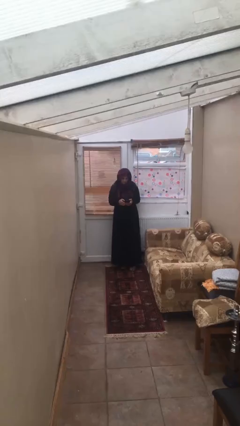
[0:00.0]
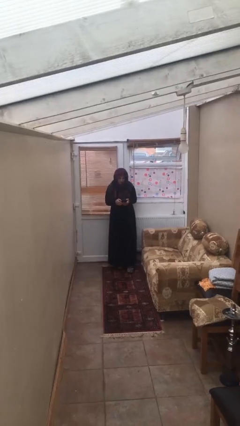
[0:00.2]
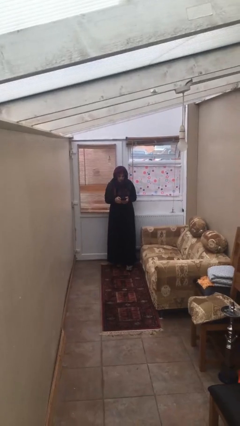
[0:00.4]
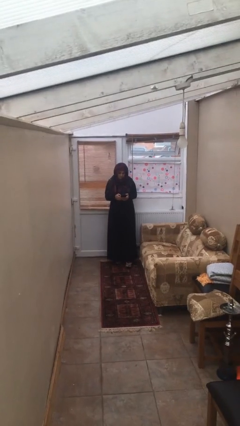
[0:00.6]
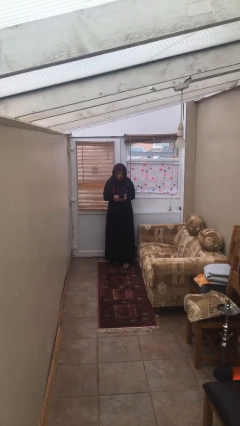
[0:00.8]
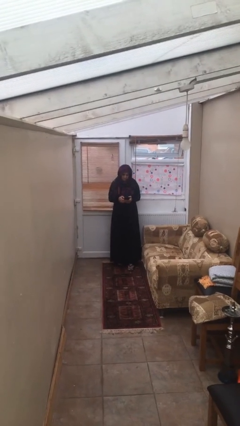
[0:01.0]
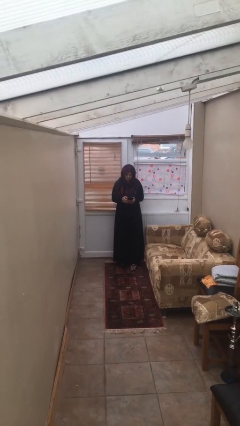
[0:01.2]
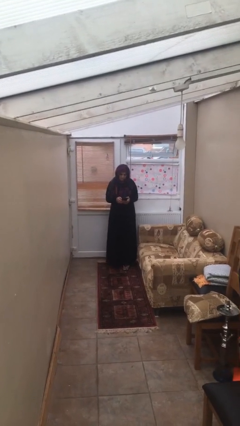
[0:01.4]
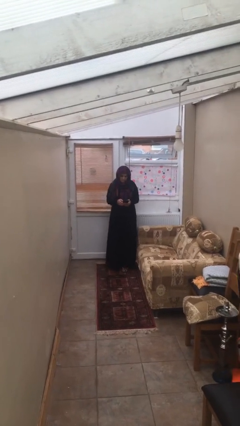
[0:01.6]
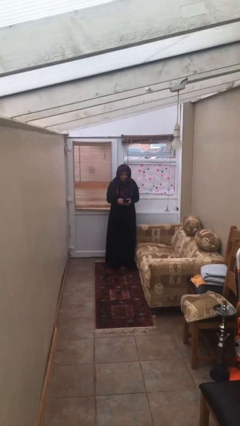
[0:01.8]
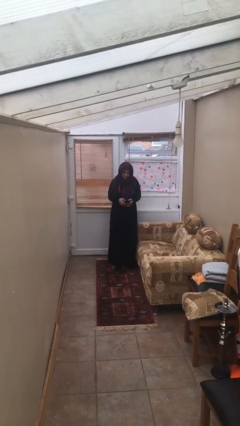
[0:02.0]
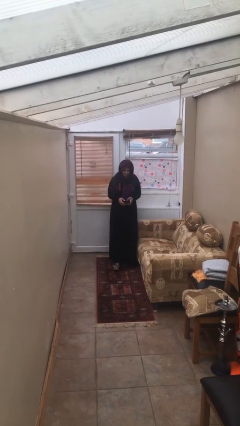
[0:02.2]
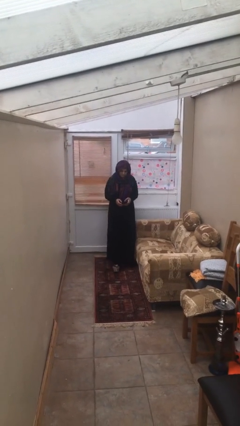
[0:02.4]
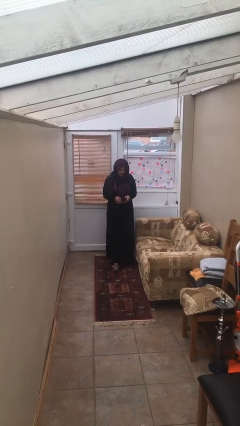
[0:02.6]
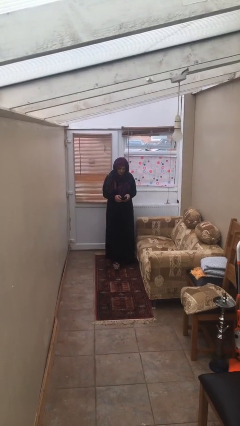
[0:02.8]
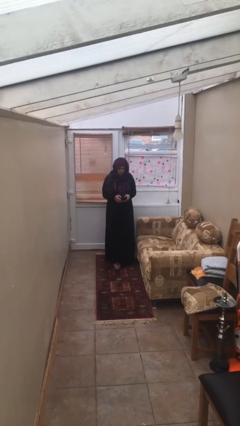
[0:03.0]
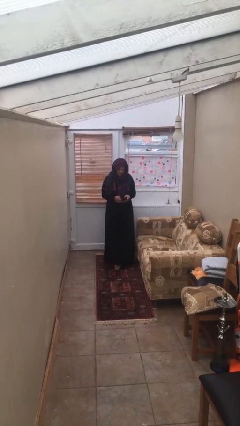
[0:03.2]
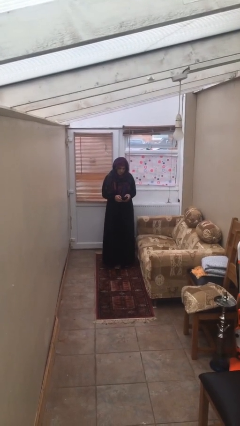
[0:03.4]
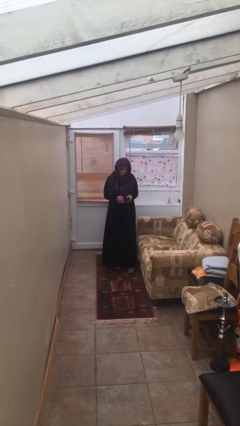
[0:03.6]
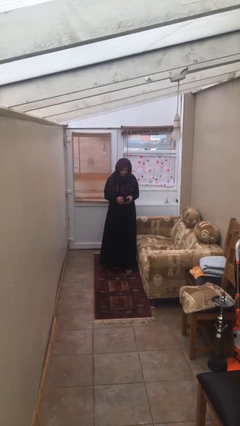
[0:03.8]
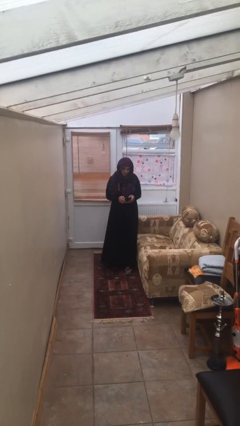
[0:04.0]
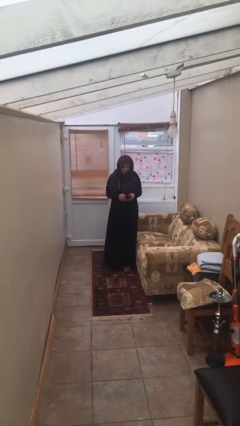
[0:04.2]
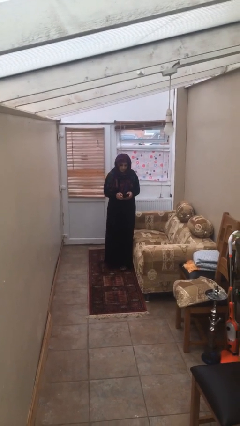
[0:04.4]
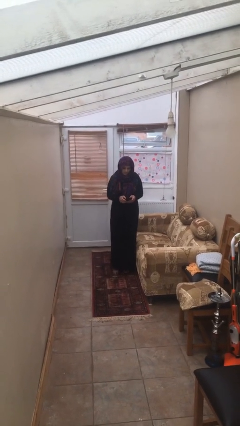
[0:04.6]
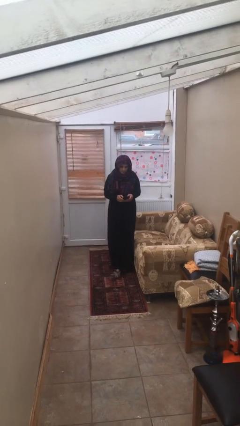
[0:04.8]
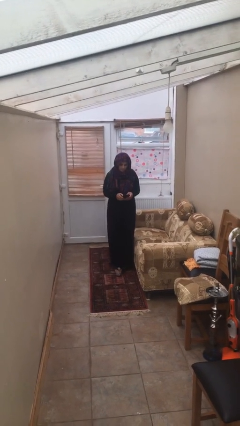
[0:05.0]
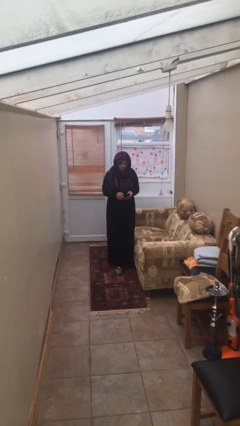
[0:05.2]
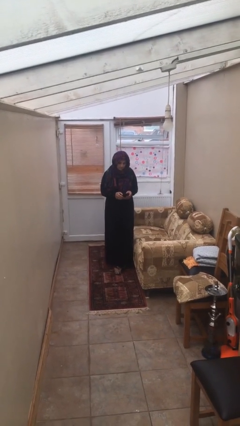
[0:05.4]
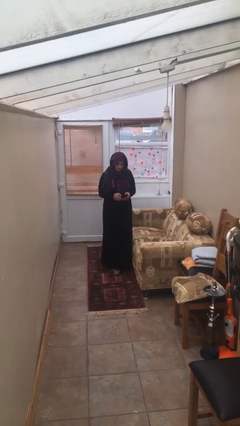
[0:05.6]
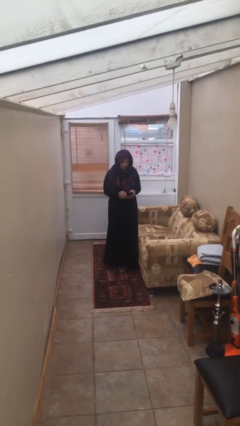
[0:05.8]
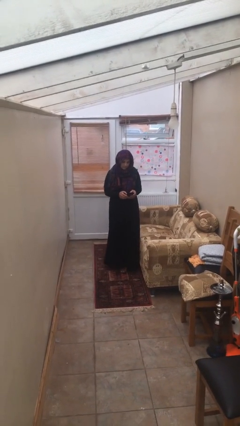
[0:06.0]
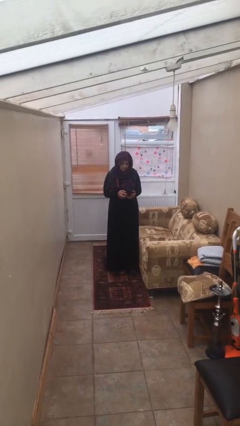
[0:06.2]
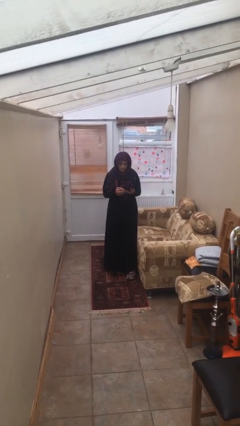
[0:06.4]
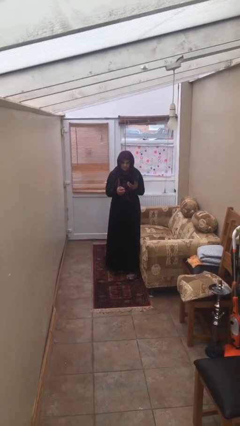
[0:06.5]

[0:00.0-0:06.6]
person texts on phone

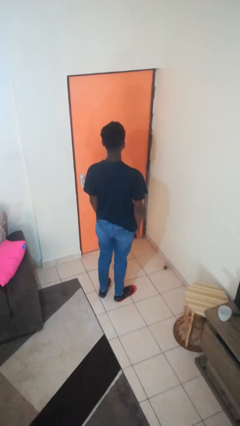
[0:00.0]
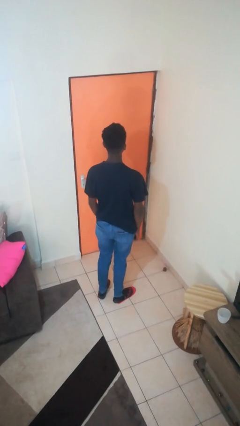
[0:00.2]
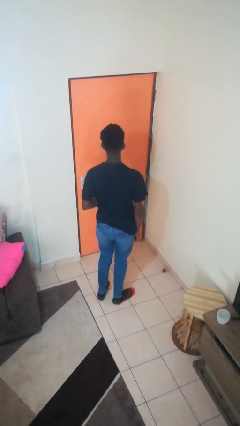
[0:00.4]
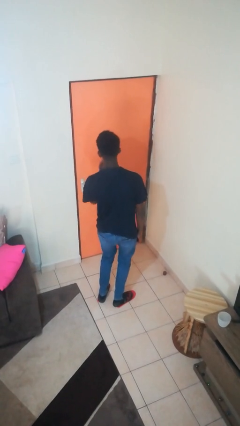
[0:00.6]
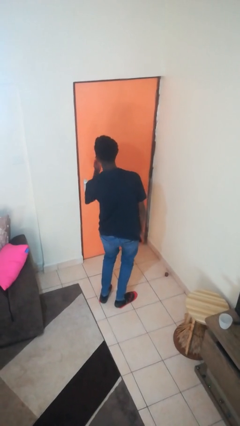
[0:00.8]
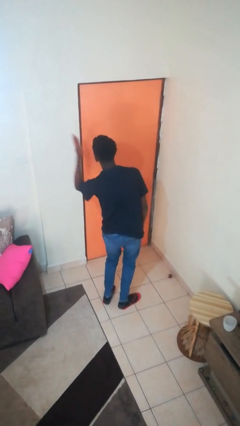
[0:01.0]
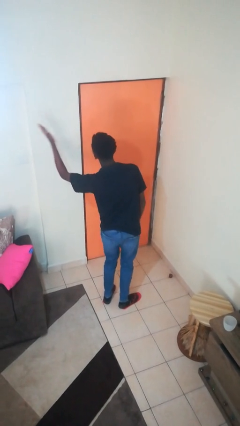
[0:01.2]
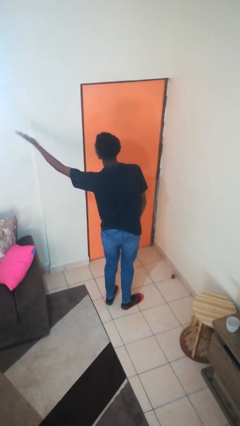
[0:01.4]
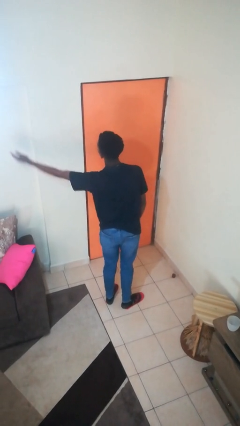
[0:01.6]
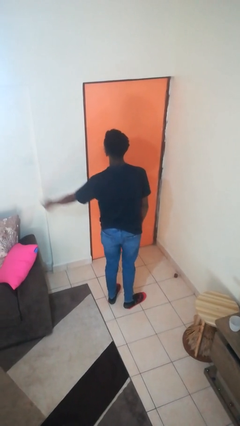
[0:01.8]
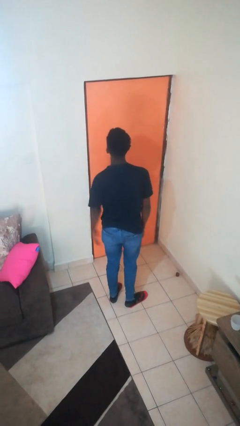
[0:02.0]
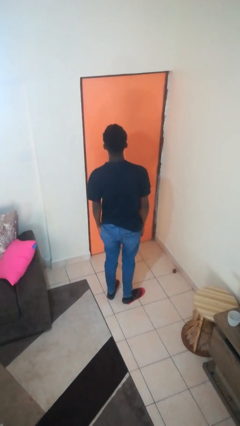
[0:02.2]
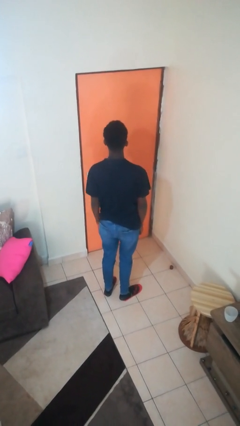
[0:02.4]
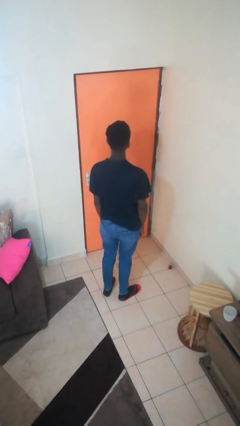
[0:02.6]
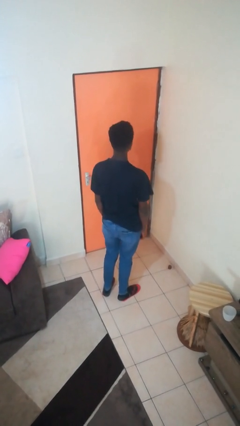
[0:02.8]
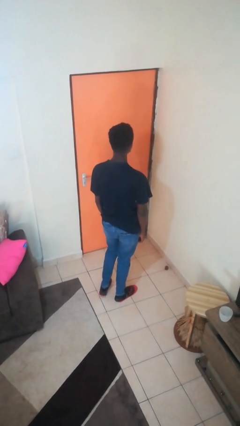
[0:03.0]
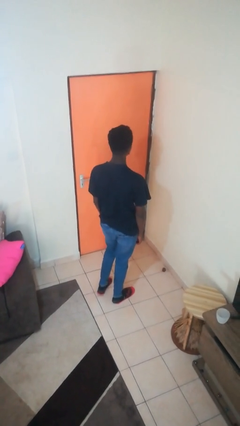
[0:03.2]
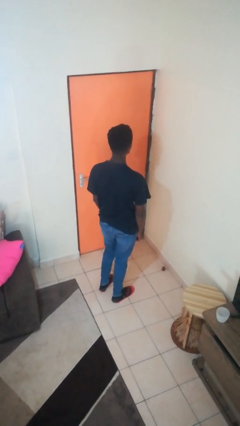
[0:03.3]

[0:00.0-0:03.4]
person gestures blow kiss

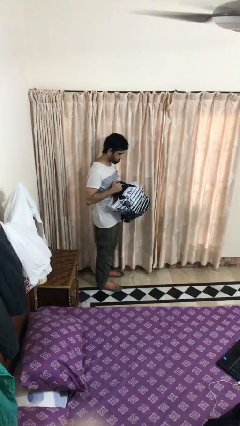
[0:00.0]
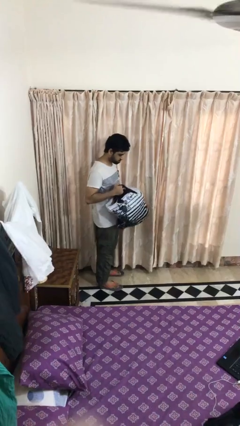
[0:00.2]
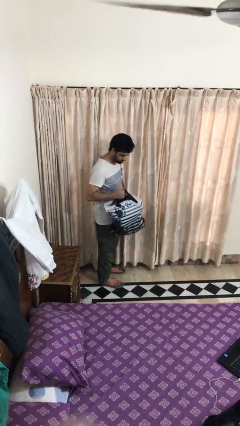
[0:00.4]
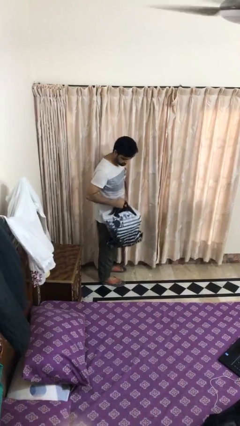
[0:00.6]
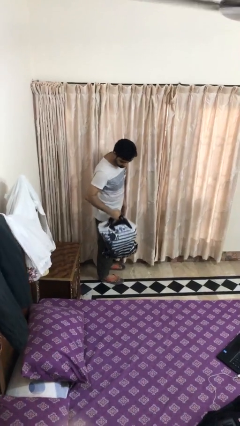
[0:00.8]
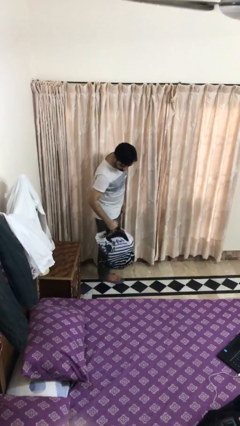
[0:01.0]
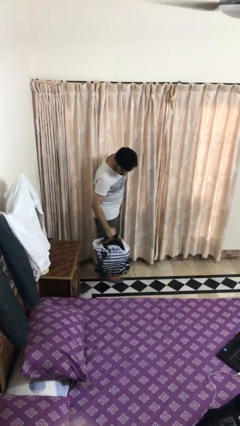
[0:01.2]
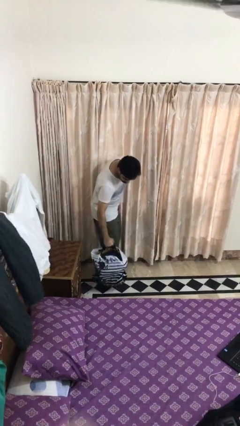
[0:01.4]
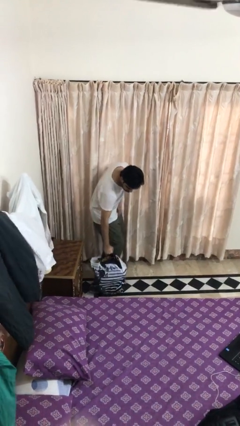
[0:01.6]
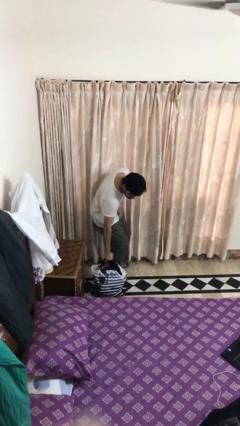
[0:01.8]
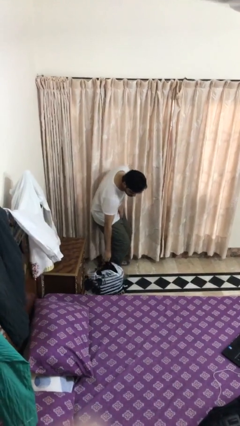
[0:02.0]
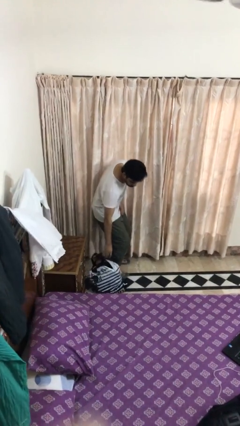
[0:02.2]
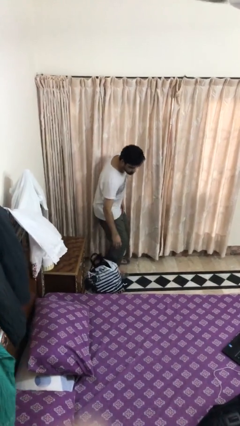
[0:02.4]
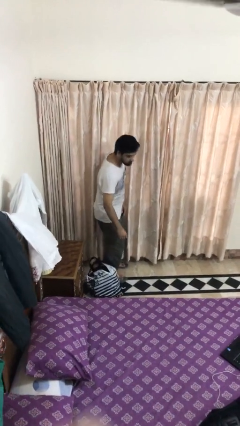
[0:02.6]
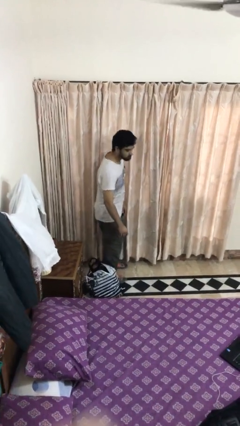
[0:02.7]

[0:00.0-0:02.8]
person puts down object on floor

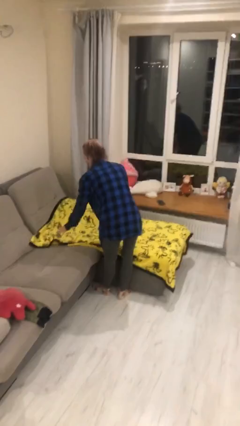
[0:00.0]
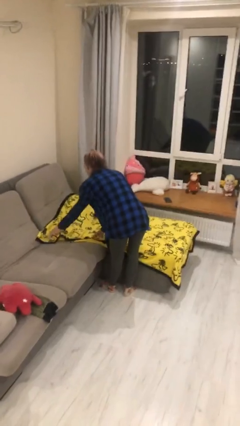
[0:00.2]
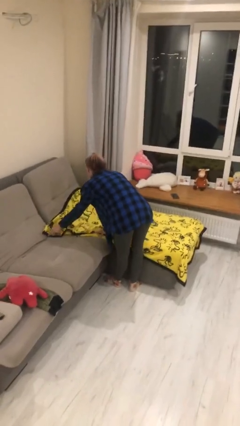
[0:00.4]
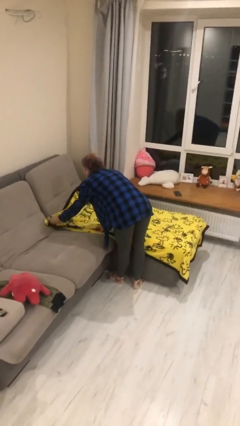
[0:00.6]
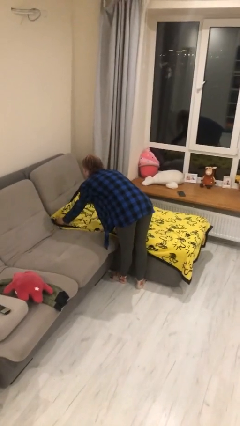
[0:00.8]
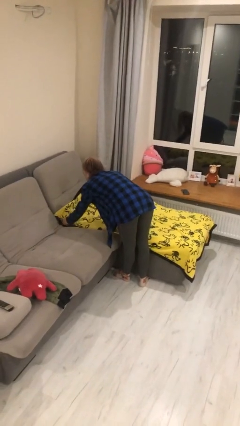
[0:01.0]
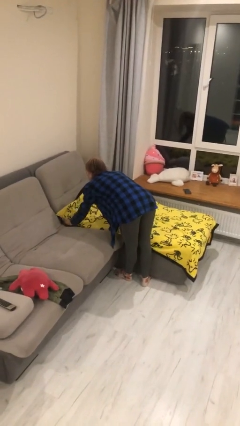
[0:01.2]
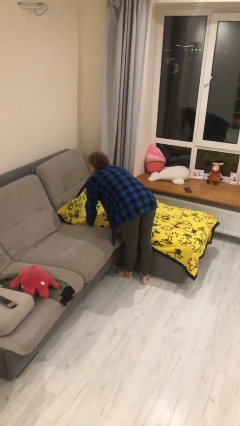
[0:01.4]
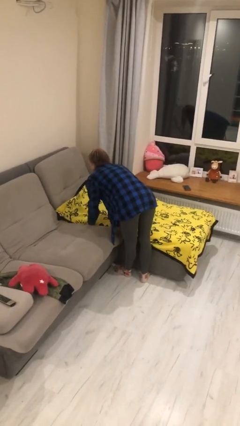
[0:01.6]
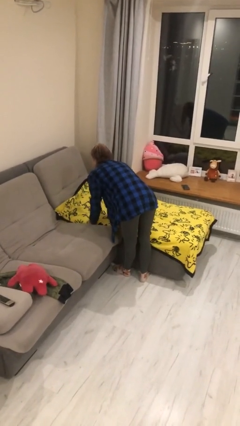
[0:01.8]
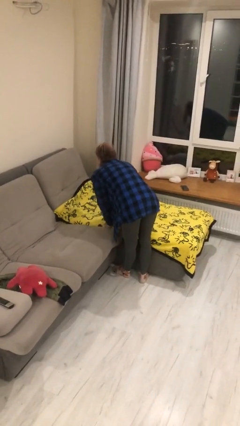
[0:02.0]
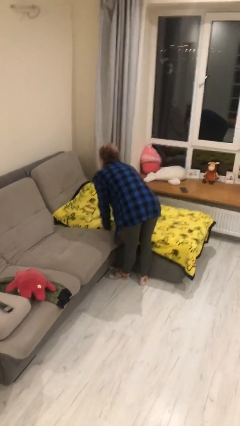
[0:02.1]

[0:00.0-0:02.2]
person makes bed

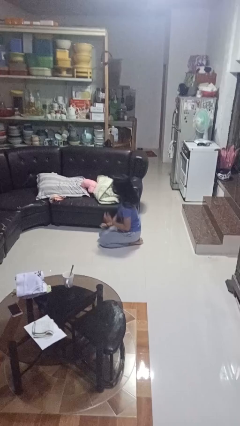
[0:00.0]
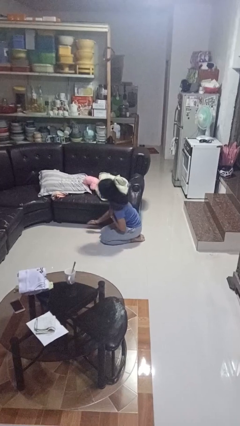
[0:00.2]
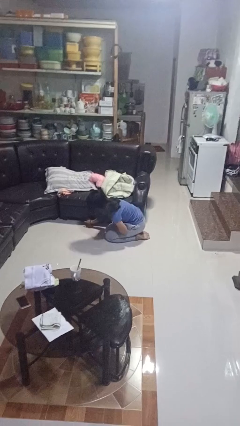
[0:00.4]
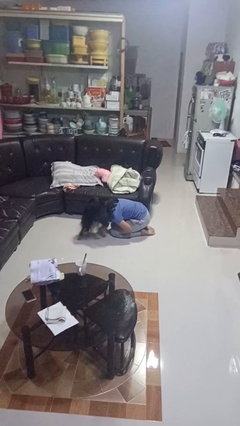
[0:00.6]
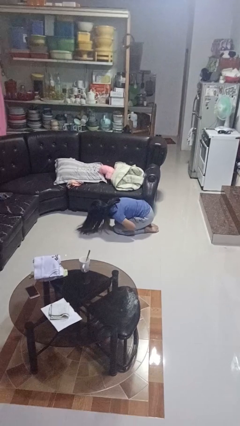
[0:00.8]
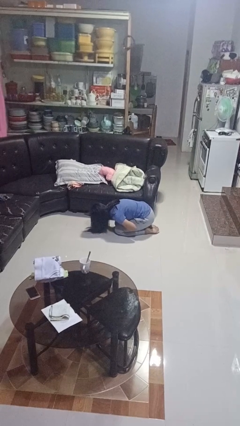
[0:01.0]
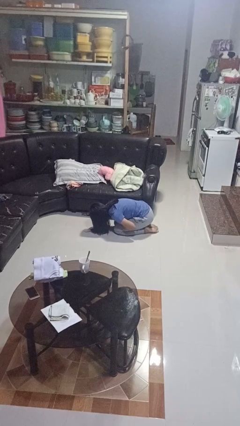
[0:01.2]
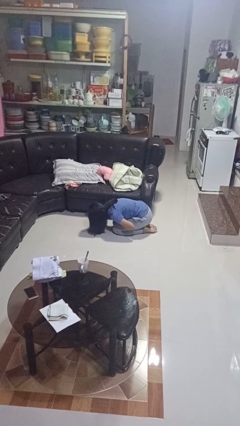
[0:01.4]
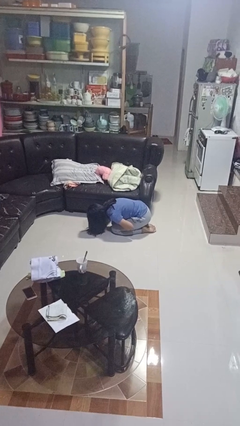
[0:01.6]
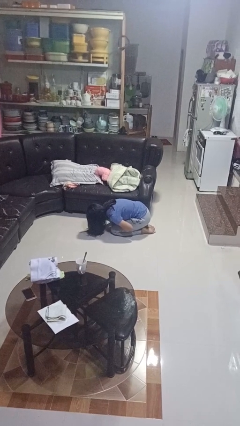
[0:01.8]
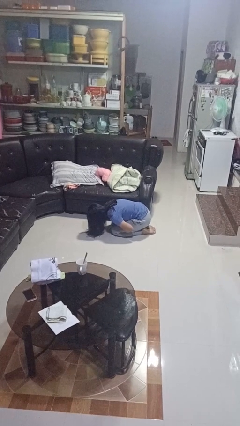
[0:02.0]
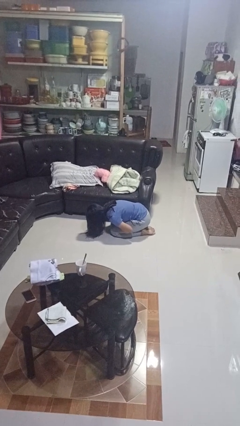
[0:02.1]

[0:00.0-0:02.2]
person searches under couch

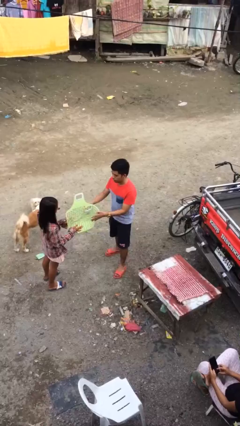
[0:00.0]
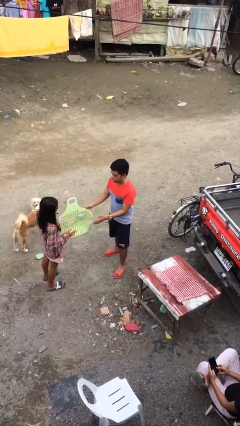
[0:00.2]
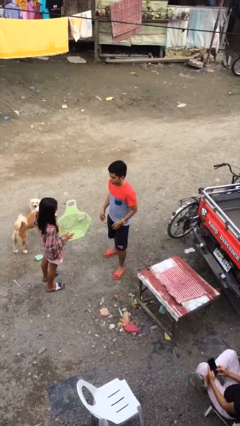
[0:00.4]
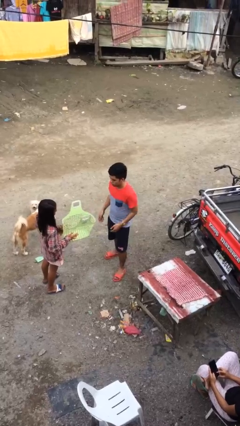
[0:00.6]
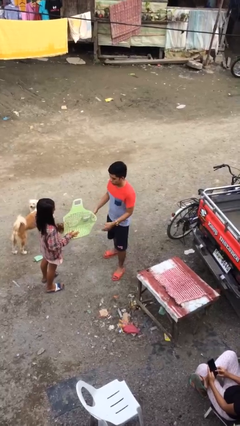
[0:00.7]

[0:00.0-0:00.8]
person transfers object to person
